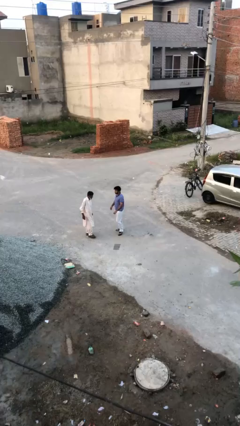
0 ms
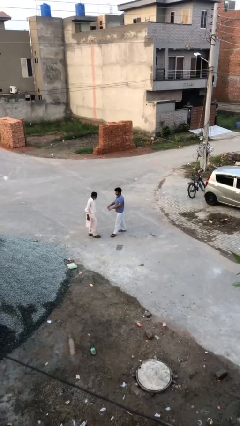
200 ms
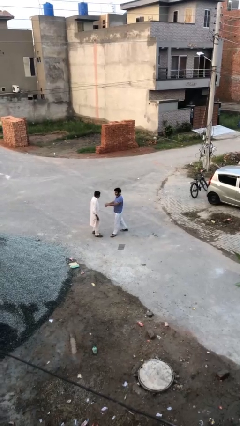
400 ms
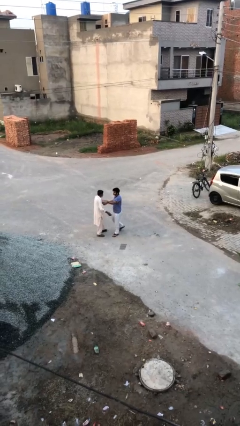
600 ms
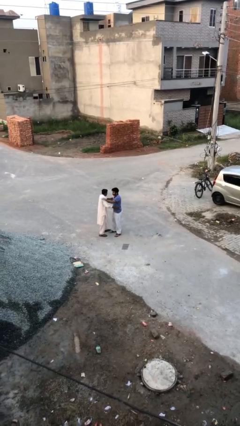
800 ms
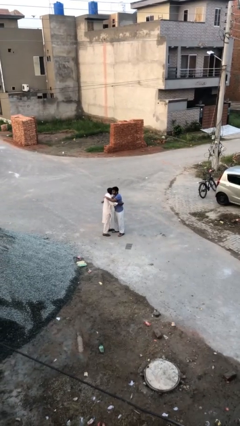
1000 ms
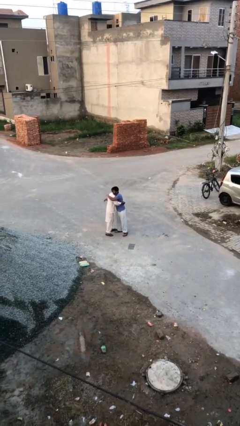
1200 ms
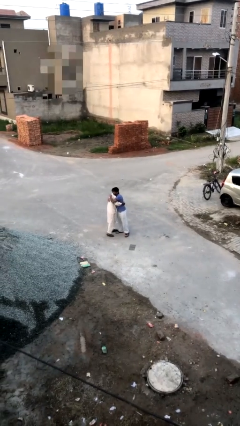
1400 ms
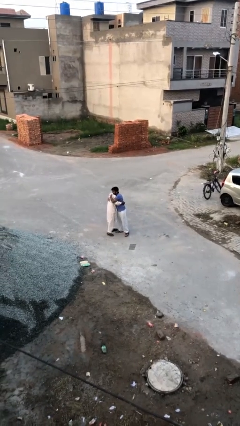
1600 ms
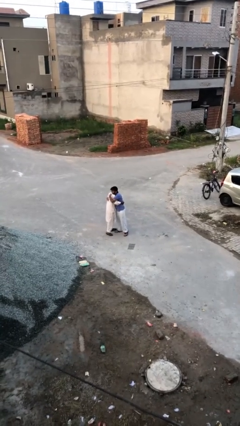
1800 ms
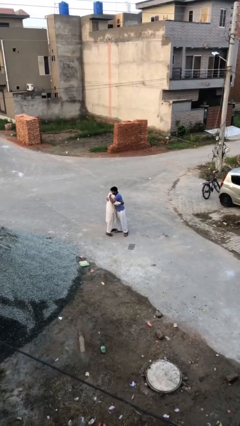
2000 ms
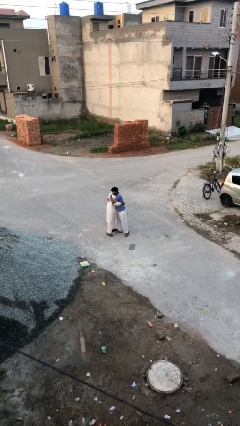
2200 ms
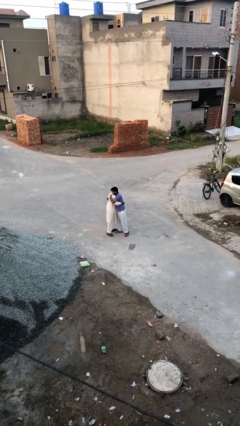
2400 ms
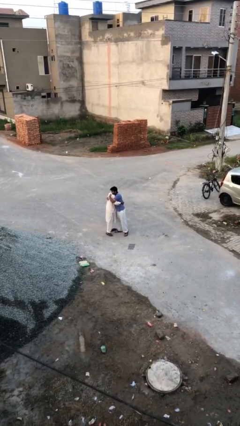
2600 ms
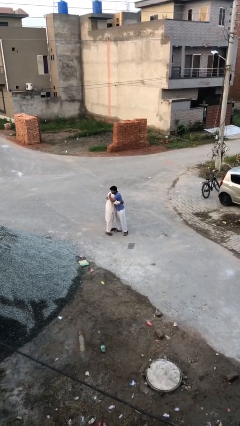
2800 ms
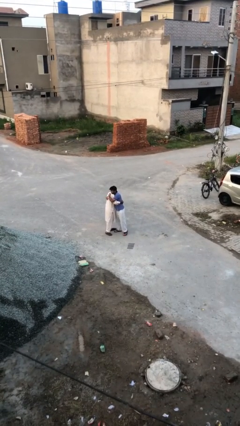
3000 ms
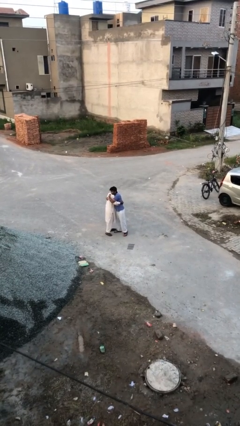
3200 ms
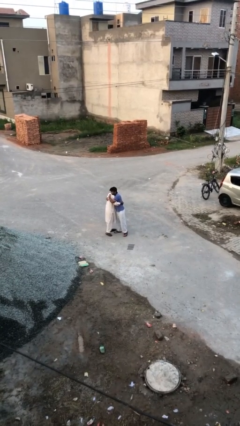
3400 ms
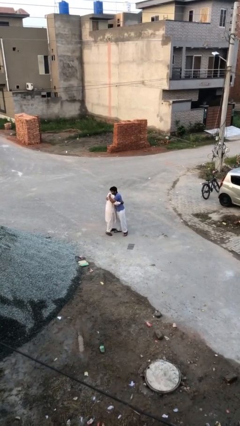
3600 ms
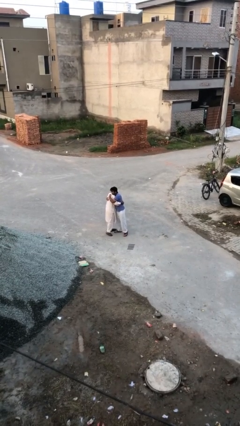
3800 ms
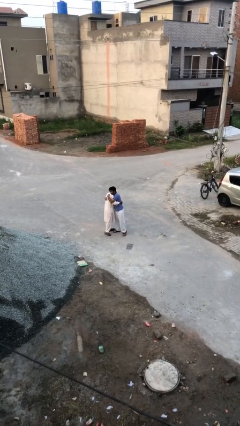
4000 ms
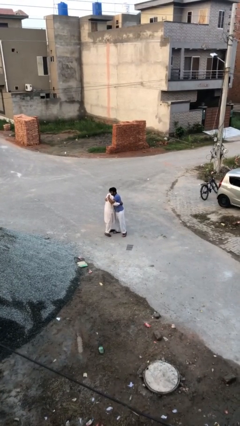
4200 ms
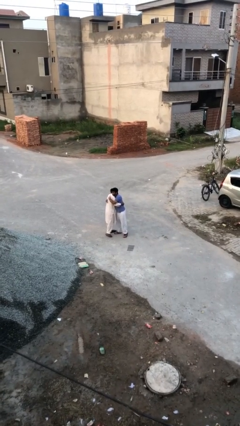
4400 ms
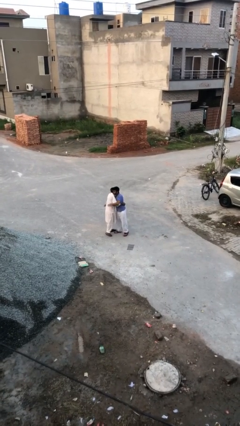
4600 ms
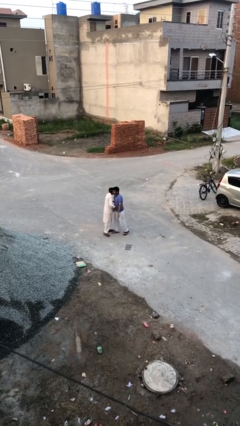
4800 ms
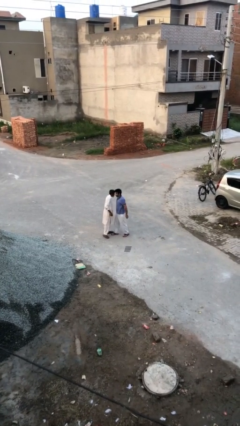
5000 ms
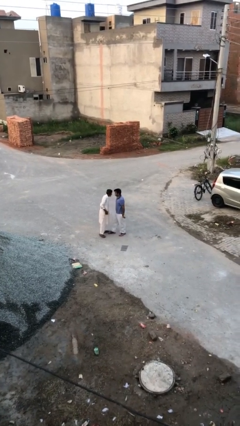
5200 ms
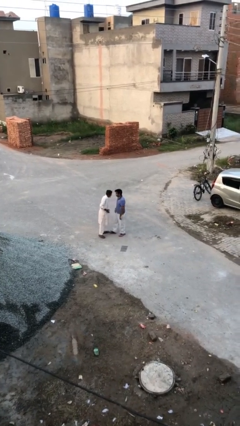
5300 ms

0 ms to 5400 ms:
person embraces person

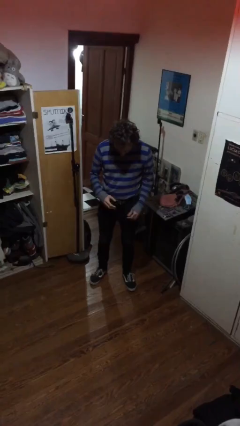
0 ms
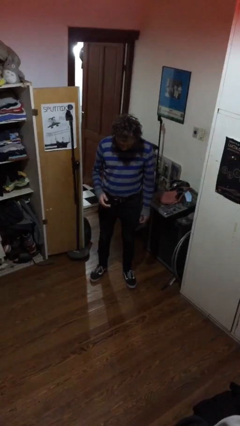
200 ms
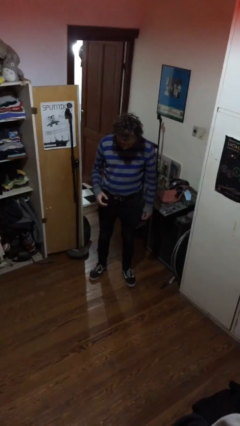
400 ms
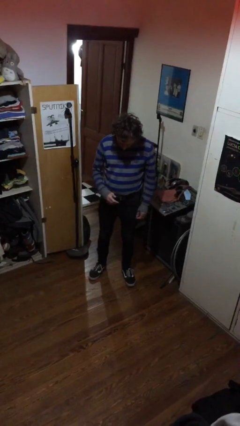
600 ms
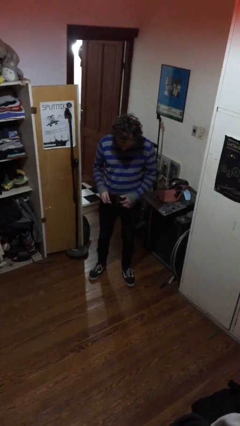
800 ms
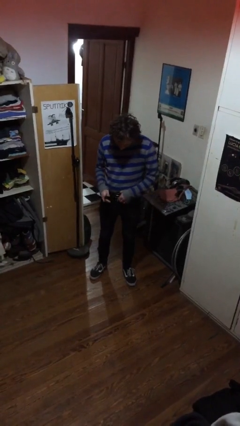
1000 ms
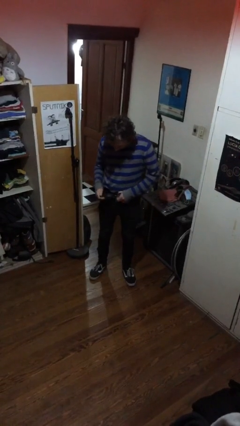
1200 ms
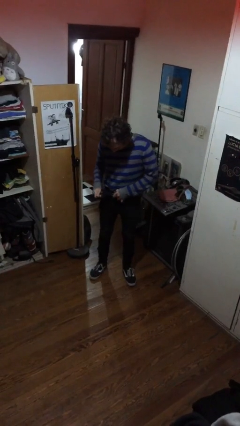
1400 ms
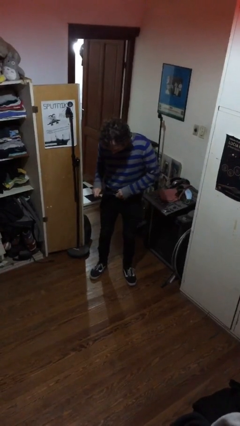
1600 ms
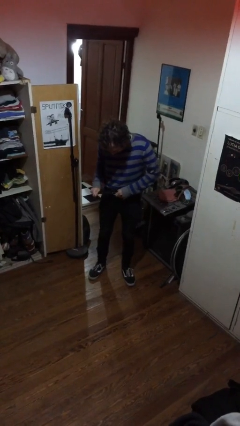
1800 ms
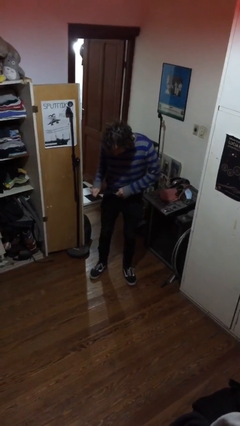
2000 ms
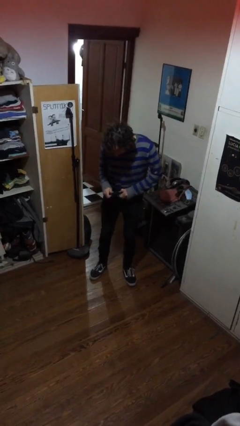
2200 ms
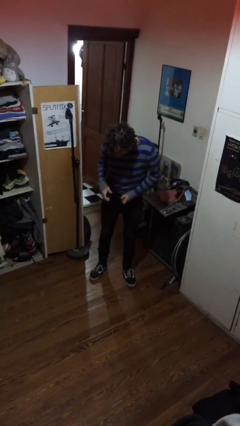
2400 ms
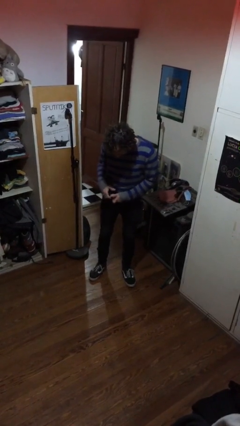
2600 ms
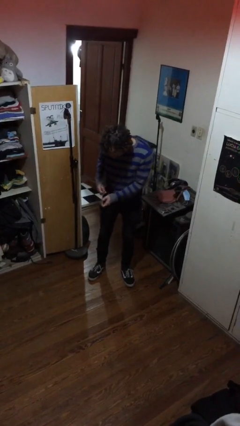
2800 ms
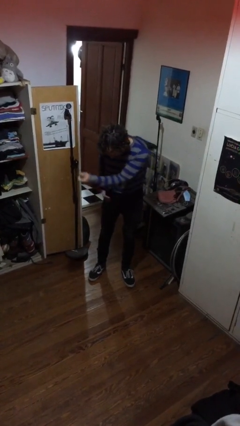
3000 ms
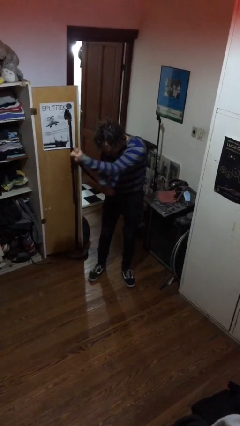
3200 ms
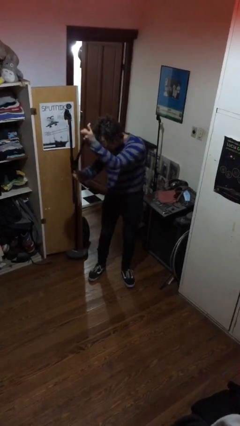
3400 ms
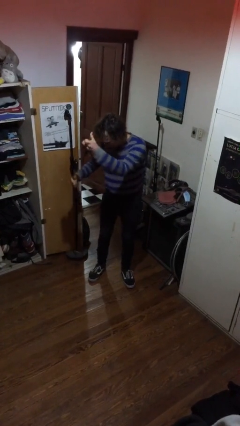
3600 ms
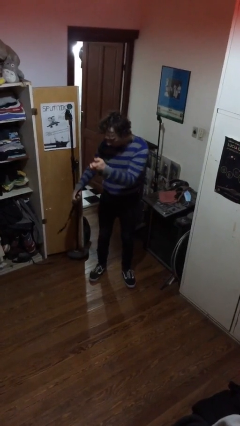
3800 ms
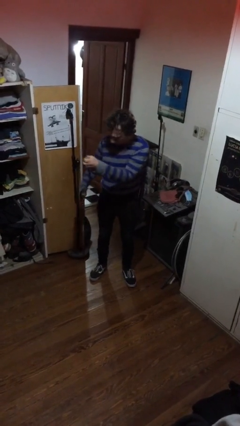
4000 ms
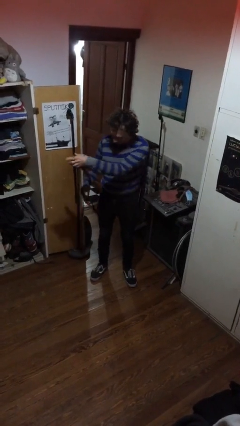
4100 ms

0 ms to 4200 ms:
person takes off belt

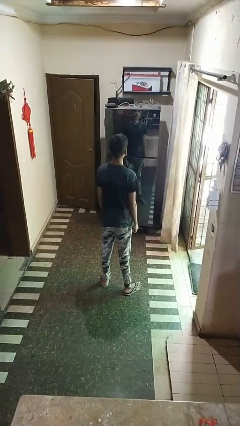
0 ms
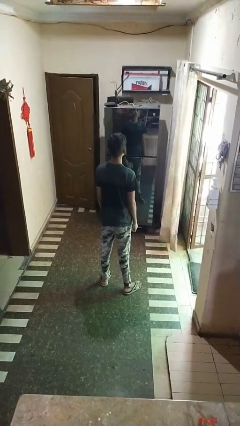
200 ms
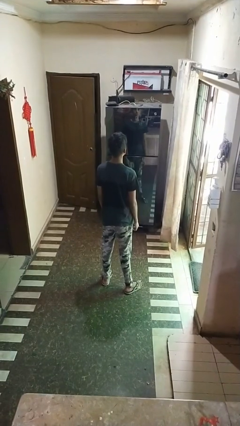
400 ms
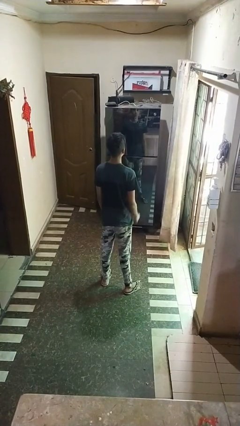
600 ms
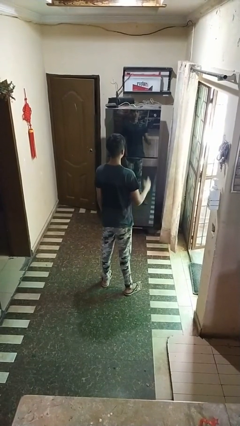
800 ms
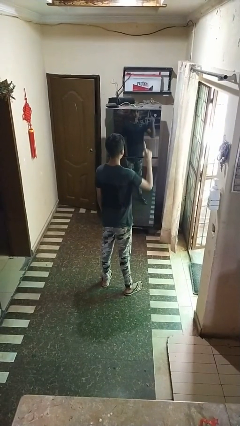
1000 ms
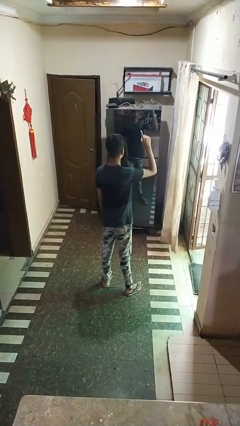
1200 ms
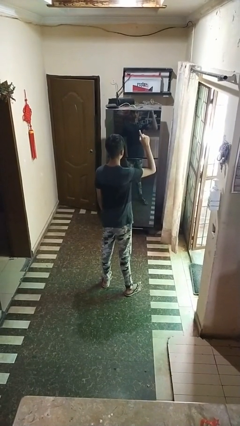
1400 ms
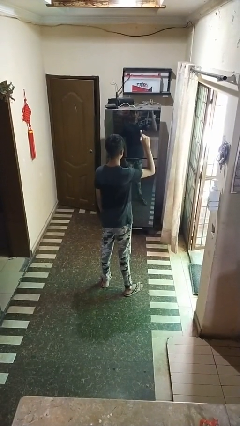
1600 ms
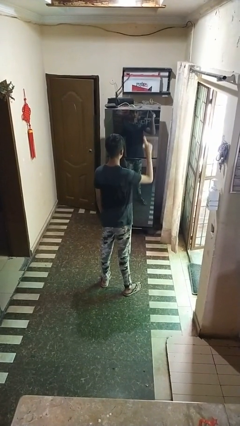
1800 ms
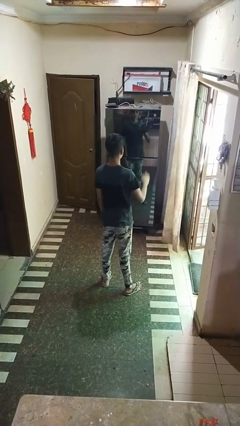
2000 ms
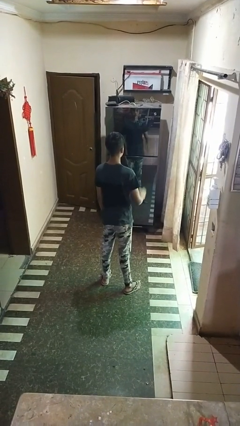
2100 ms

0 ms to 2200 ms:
person gestures number one

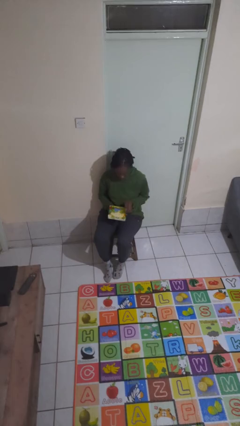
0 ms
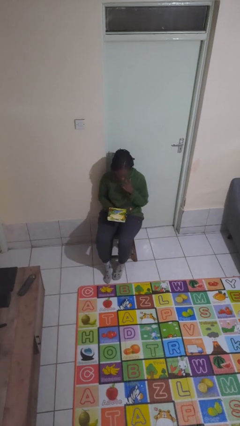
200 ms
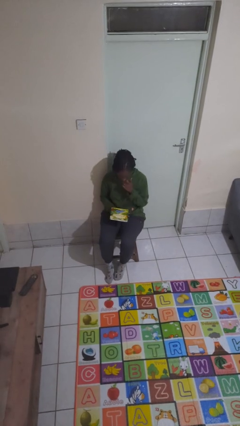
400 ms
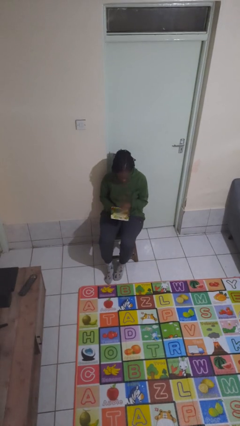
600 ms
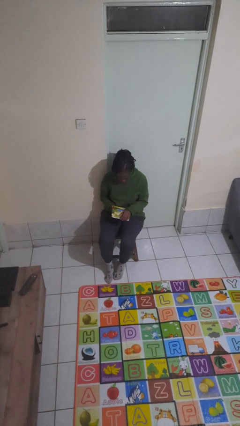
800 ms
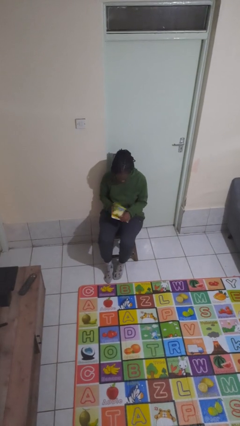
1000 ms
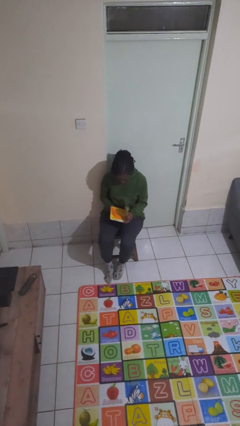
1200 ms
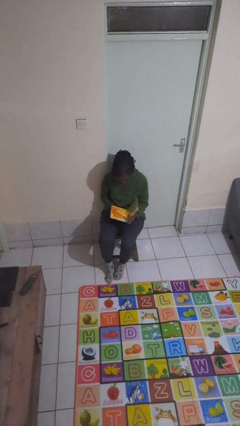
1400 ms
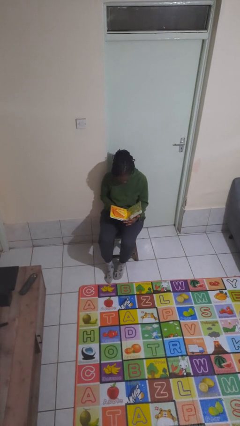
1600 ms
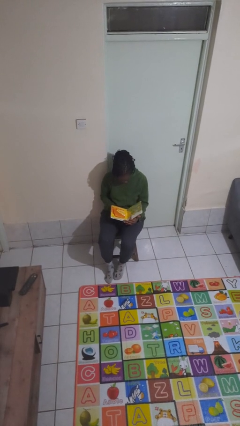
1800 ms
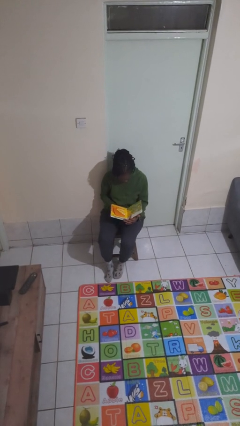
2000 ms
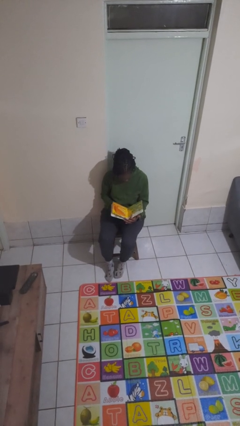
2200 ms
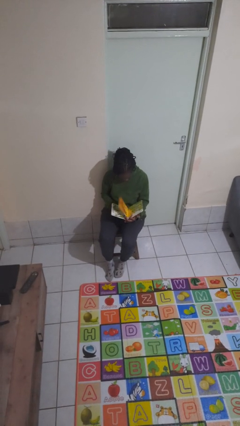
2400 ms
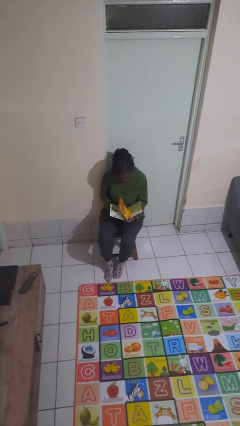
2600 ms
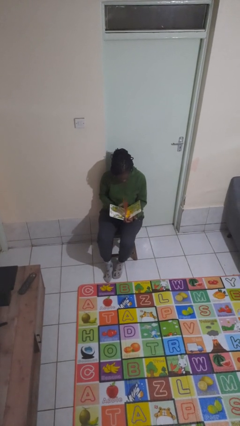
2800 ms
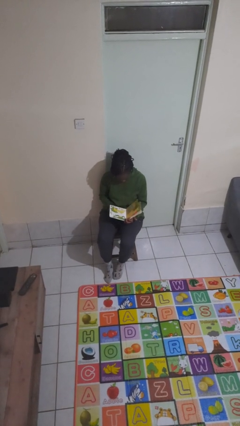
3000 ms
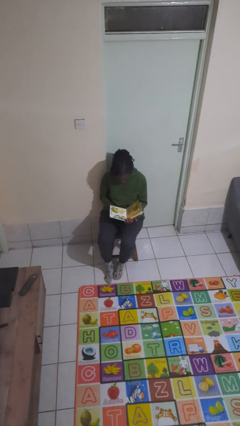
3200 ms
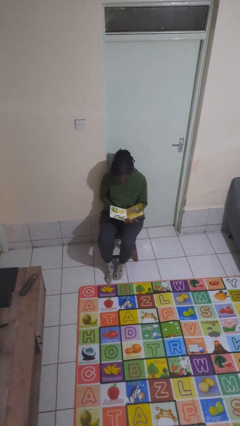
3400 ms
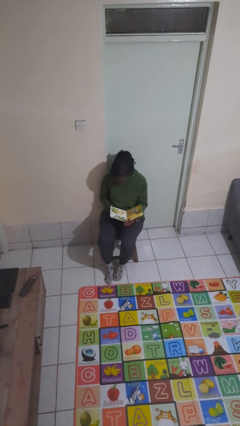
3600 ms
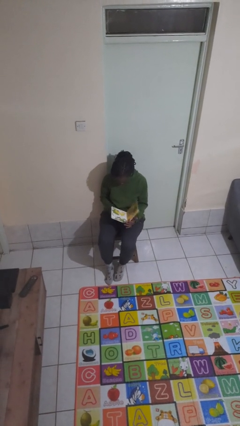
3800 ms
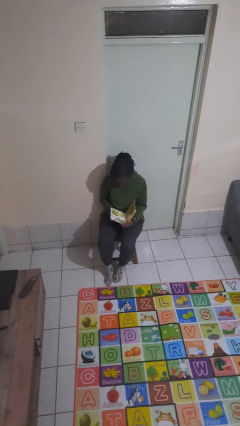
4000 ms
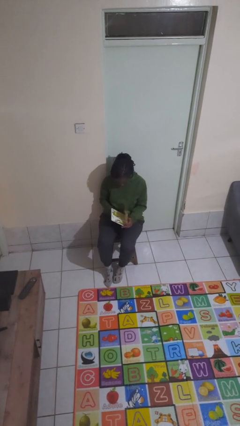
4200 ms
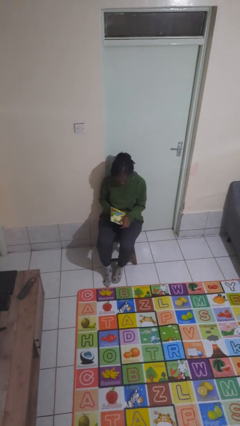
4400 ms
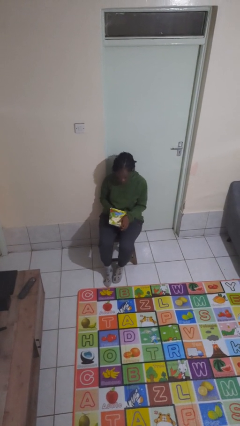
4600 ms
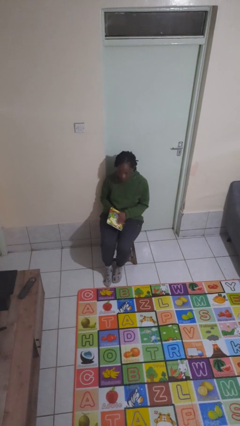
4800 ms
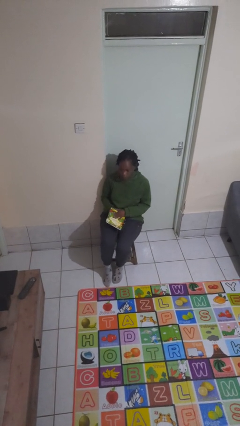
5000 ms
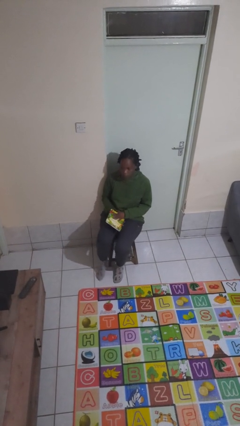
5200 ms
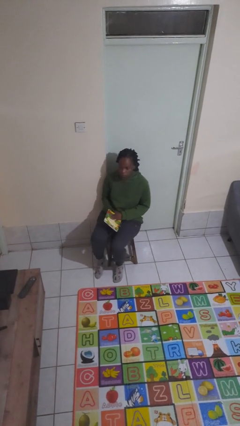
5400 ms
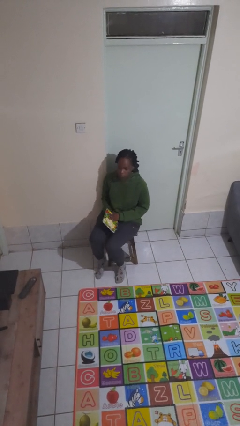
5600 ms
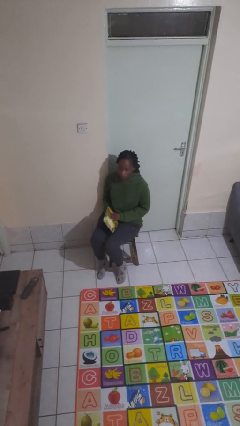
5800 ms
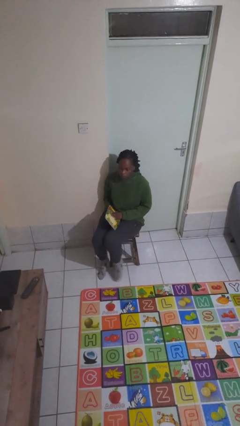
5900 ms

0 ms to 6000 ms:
person reads book
